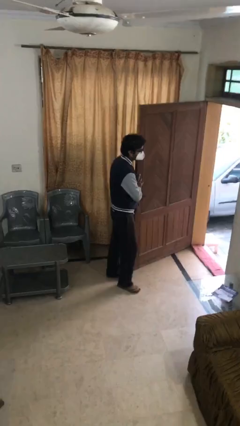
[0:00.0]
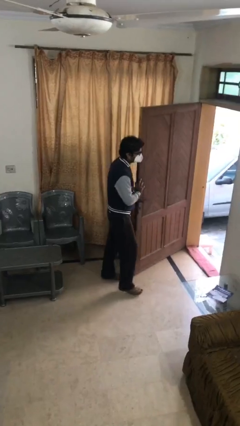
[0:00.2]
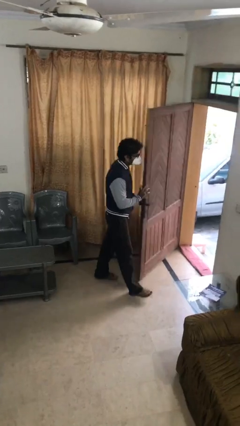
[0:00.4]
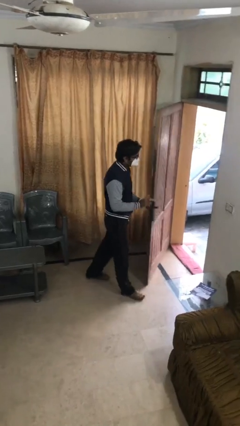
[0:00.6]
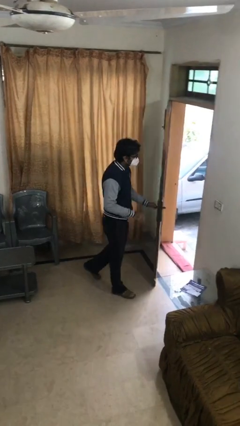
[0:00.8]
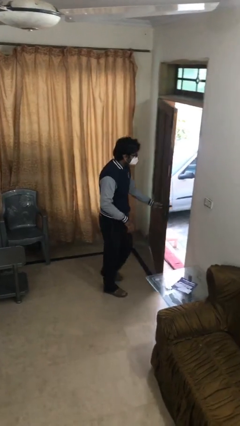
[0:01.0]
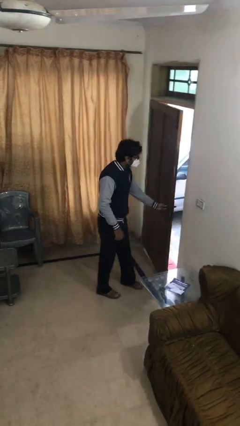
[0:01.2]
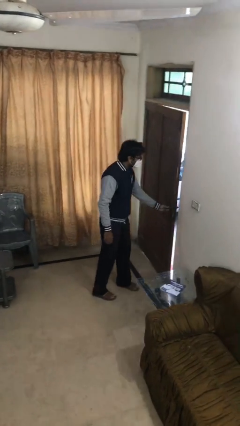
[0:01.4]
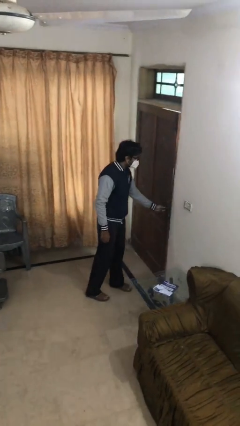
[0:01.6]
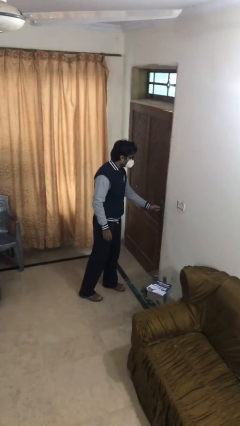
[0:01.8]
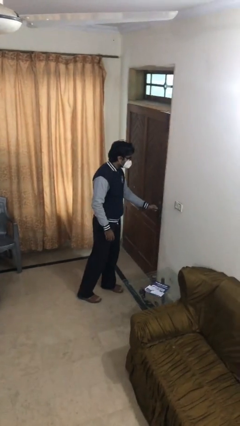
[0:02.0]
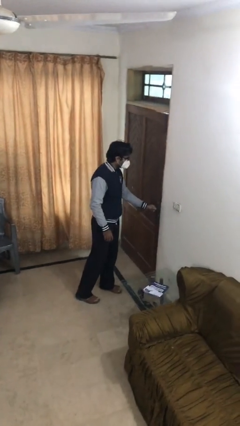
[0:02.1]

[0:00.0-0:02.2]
person closes facility door

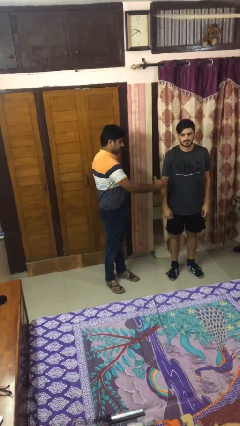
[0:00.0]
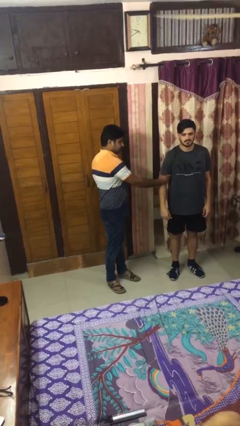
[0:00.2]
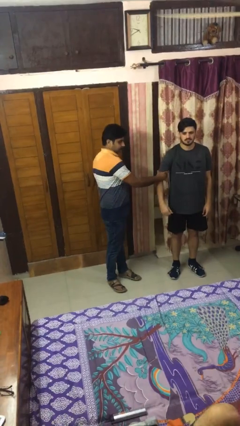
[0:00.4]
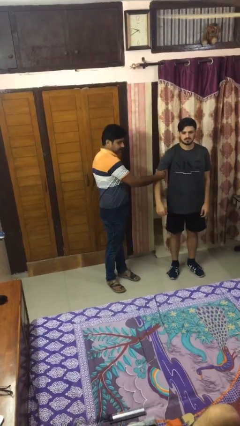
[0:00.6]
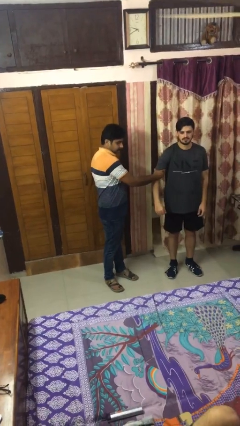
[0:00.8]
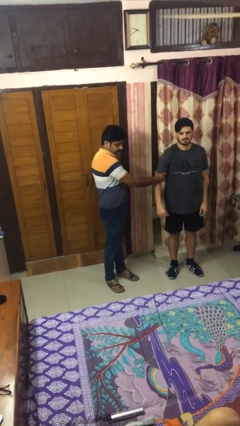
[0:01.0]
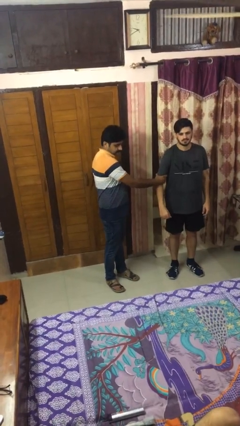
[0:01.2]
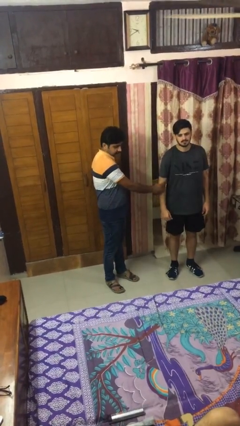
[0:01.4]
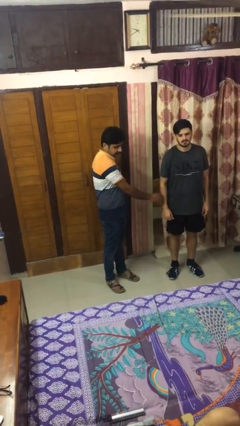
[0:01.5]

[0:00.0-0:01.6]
person grabs person by bicep

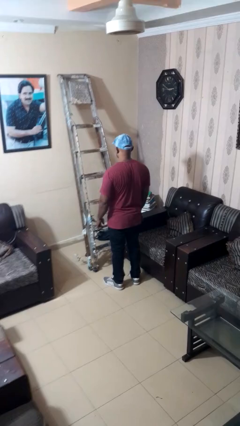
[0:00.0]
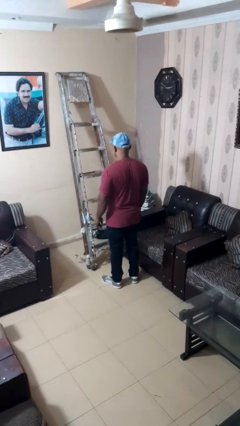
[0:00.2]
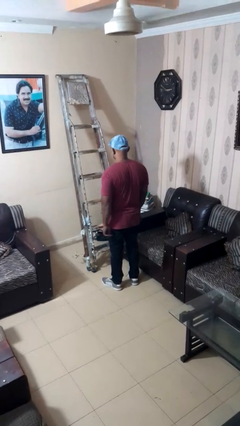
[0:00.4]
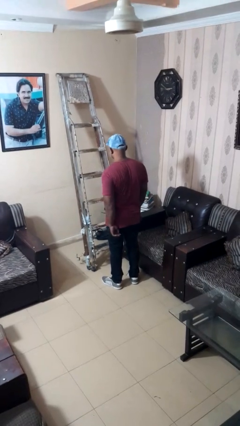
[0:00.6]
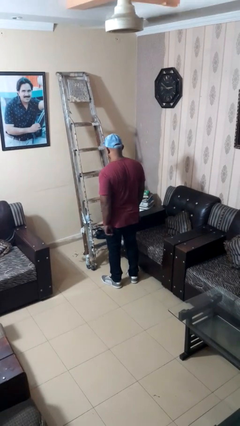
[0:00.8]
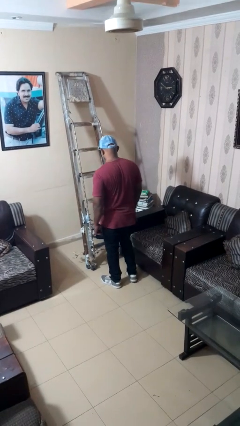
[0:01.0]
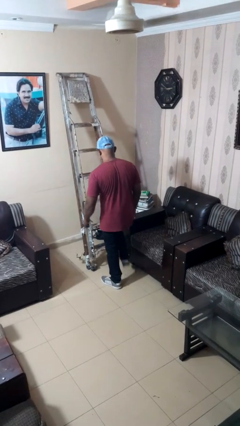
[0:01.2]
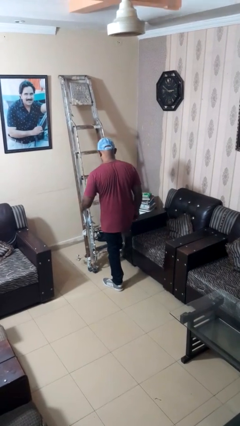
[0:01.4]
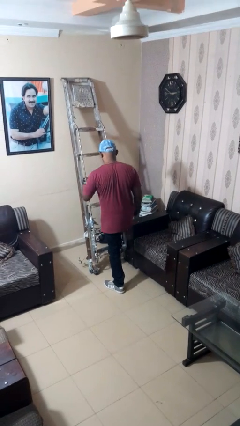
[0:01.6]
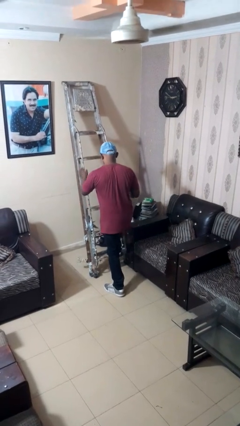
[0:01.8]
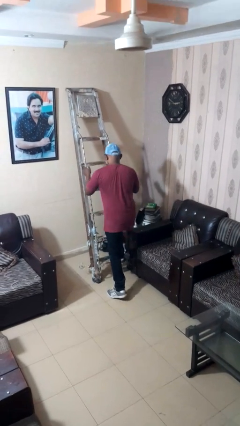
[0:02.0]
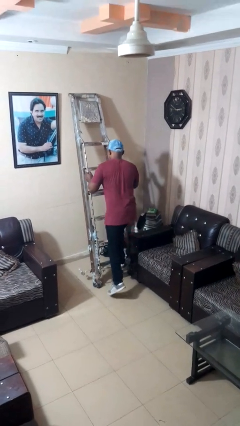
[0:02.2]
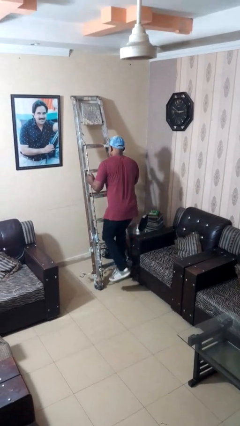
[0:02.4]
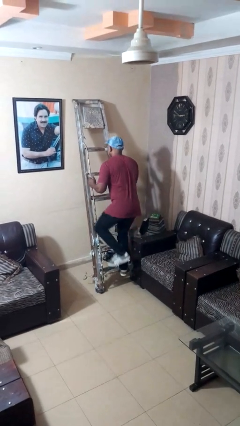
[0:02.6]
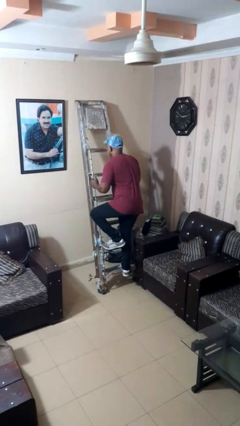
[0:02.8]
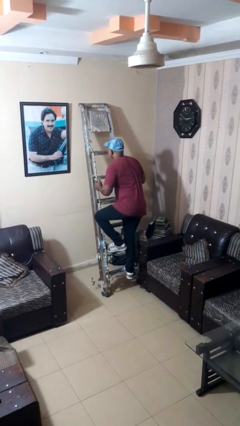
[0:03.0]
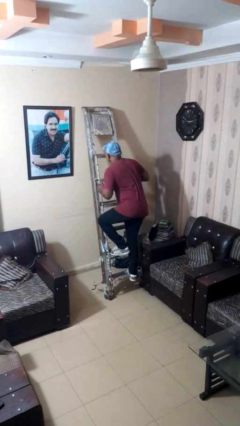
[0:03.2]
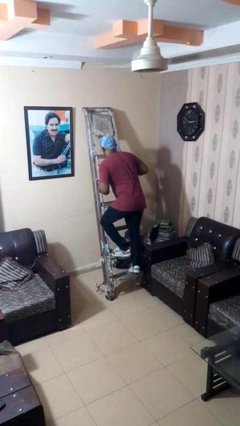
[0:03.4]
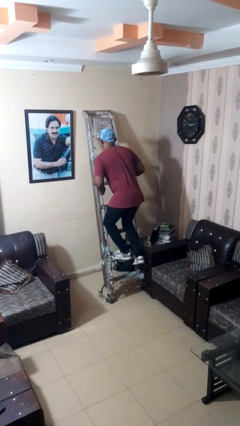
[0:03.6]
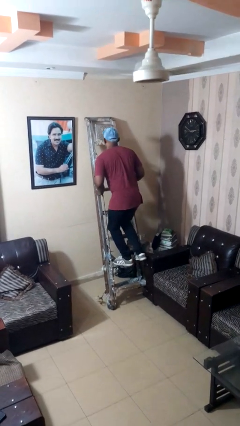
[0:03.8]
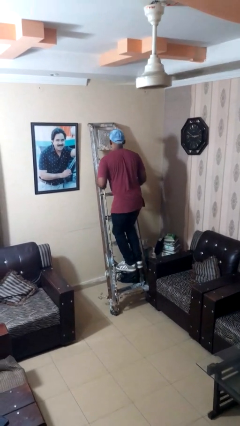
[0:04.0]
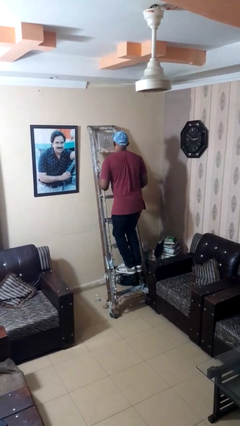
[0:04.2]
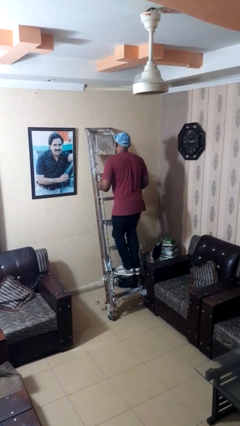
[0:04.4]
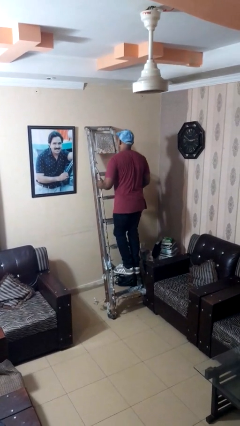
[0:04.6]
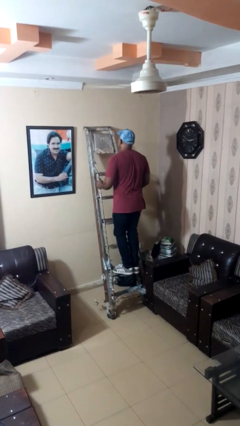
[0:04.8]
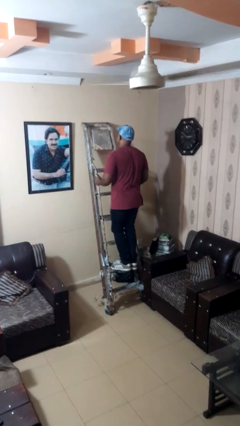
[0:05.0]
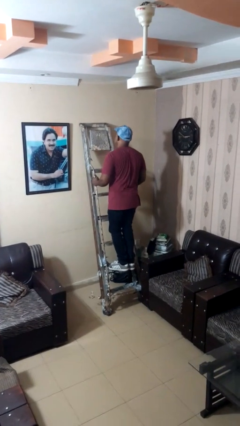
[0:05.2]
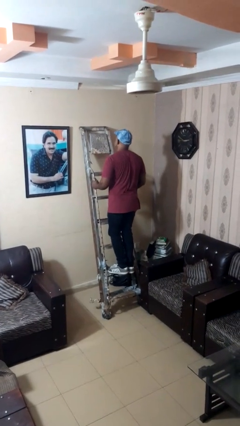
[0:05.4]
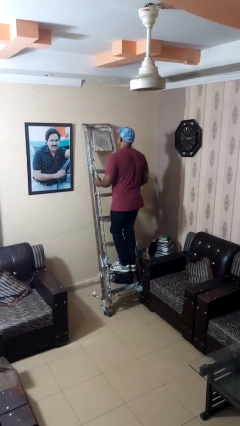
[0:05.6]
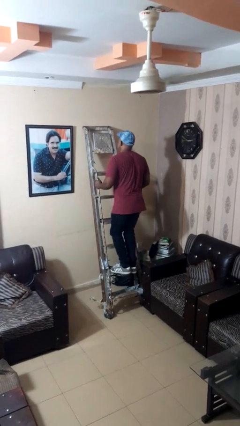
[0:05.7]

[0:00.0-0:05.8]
person climbs up ladder

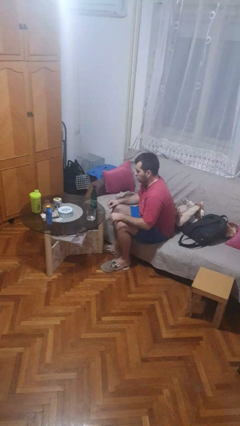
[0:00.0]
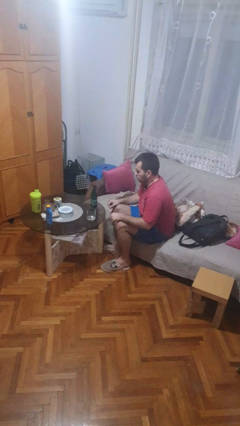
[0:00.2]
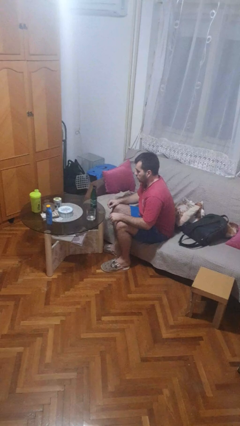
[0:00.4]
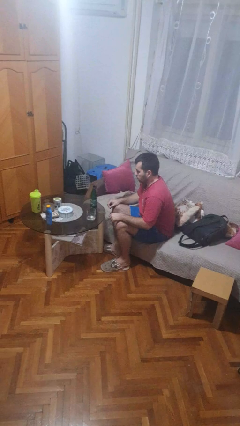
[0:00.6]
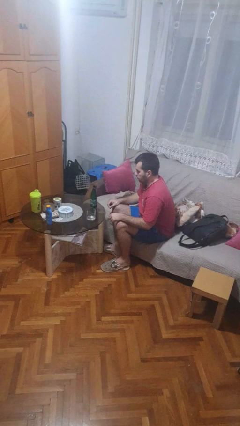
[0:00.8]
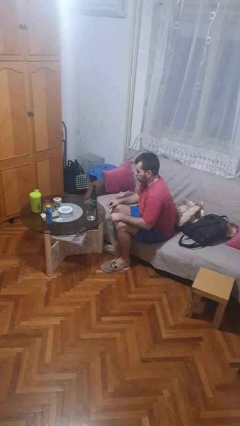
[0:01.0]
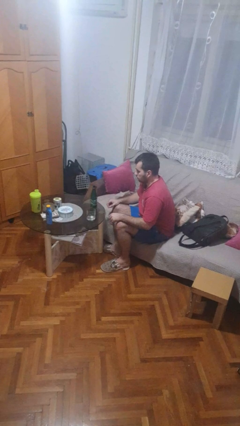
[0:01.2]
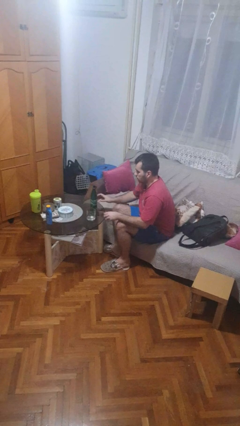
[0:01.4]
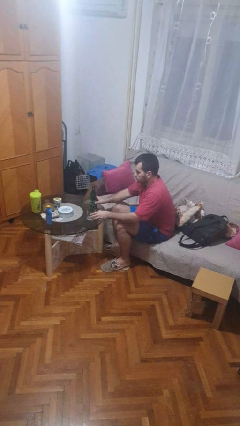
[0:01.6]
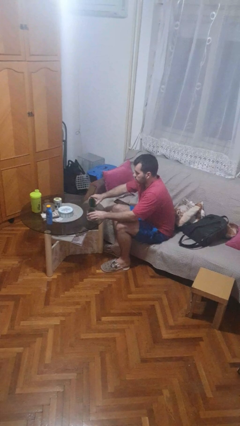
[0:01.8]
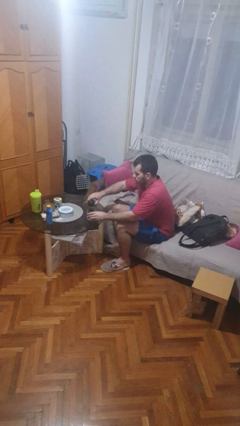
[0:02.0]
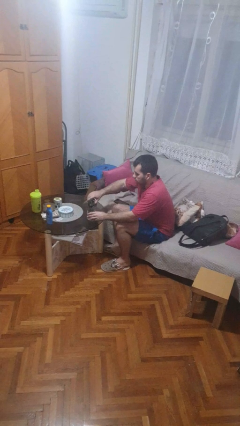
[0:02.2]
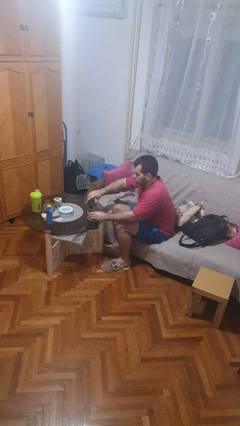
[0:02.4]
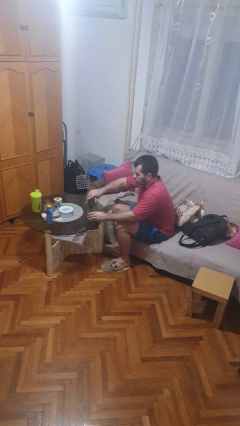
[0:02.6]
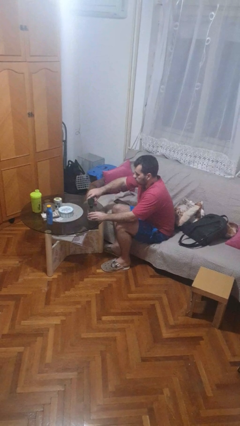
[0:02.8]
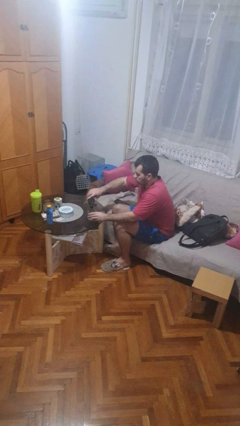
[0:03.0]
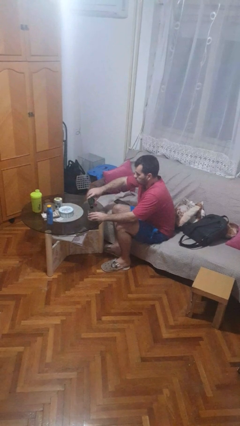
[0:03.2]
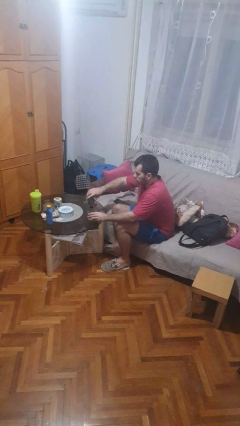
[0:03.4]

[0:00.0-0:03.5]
person pours liquid into cup

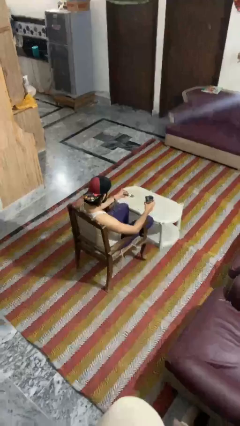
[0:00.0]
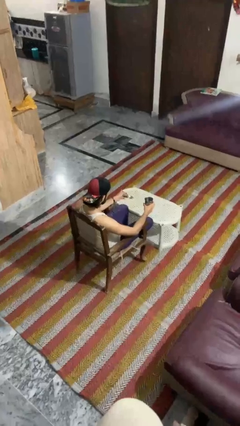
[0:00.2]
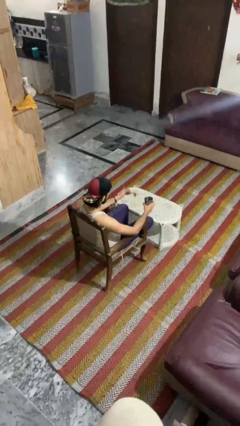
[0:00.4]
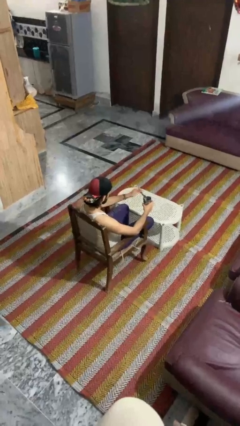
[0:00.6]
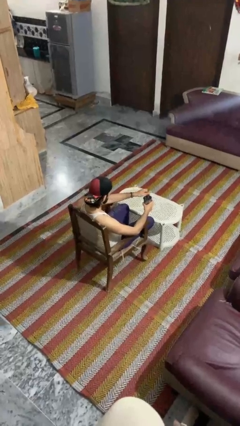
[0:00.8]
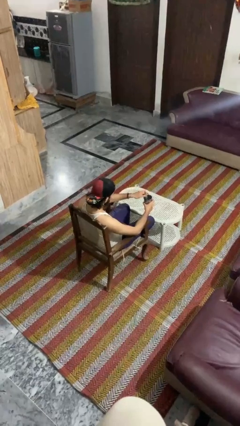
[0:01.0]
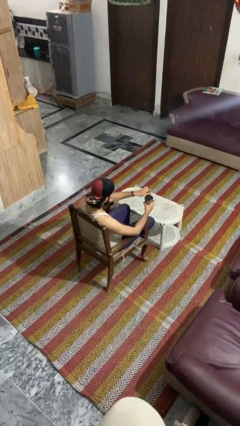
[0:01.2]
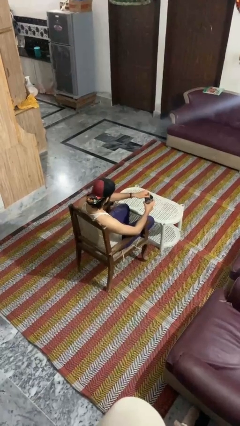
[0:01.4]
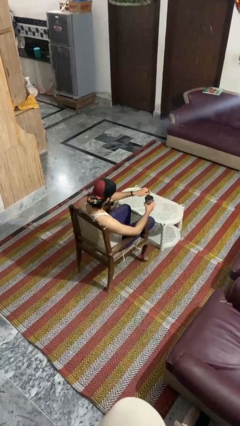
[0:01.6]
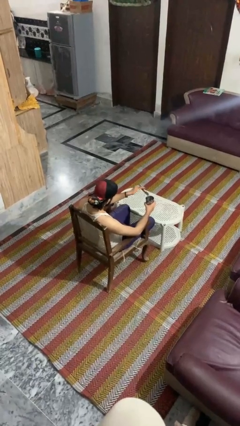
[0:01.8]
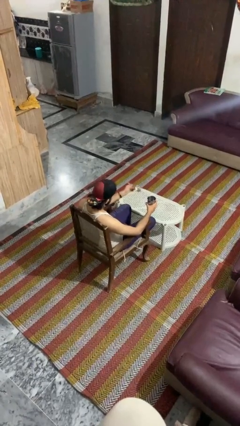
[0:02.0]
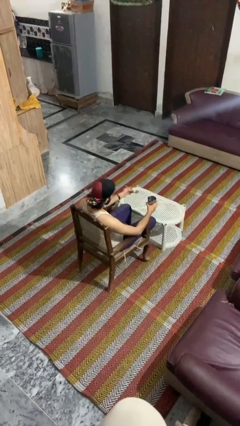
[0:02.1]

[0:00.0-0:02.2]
person stirs mug

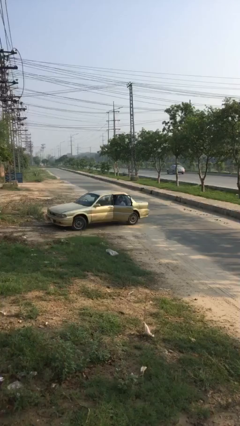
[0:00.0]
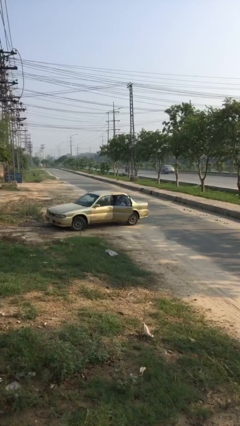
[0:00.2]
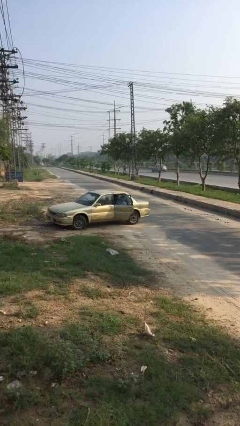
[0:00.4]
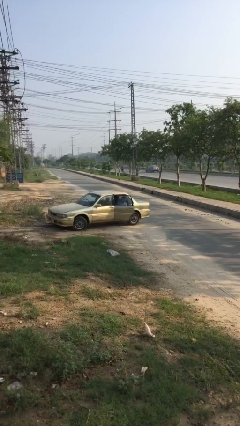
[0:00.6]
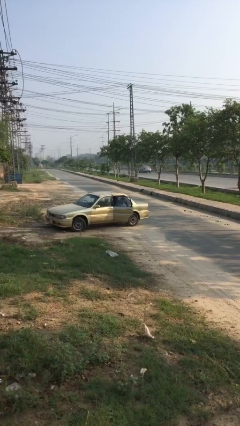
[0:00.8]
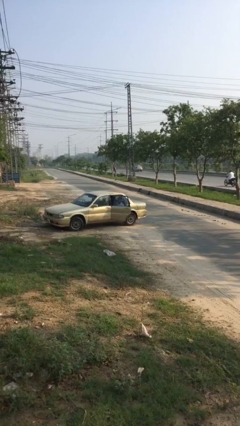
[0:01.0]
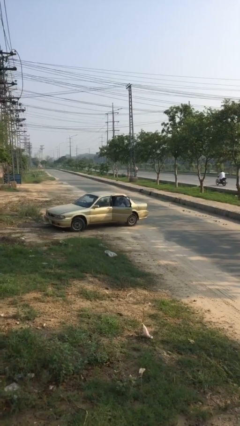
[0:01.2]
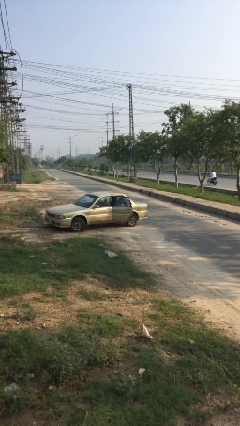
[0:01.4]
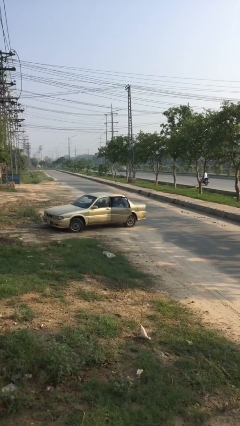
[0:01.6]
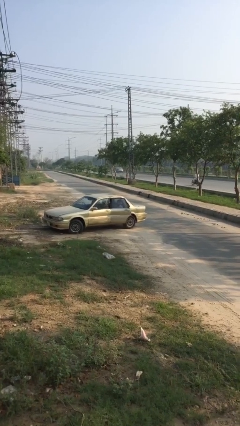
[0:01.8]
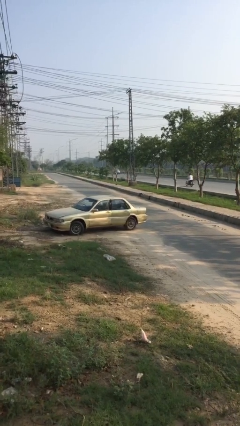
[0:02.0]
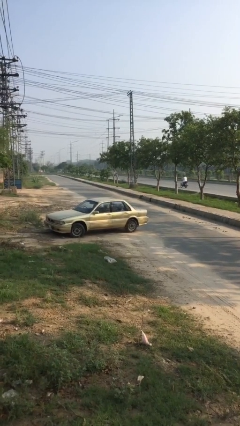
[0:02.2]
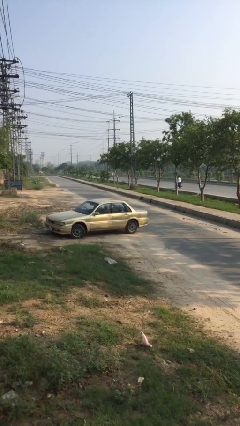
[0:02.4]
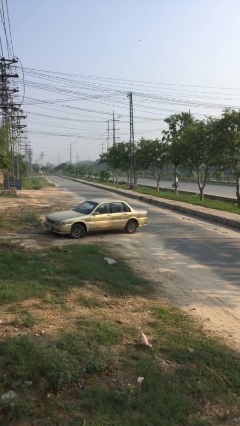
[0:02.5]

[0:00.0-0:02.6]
person closes car door
